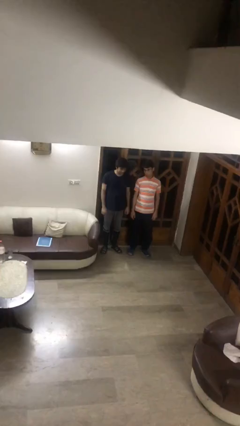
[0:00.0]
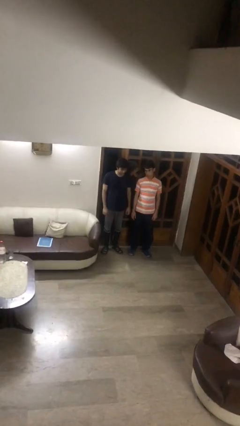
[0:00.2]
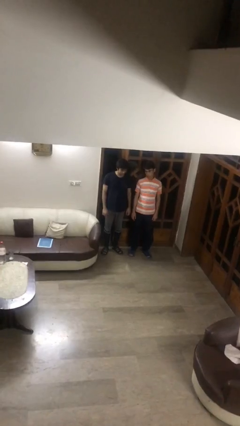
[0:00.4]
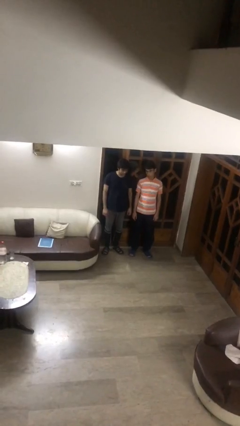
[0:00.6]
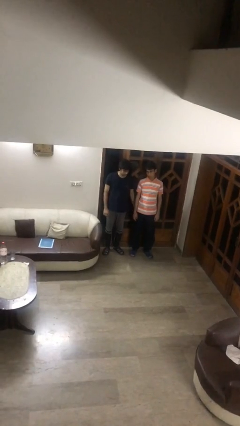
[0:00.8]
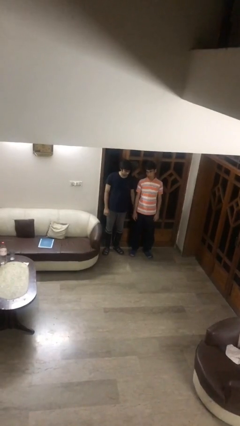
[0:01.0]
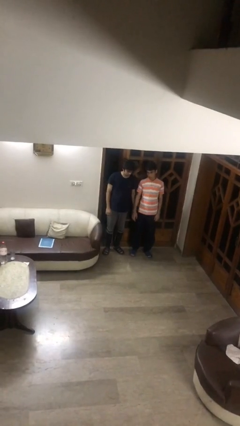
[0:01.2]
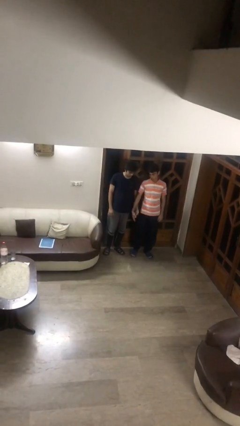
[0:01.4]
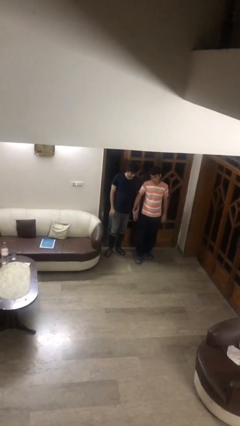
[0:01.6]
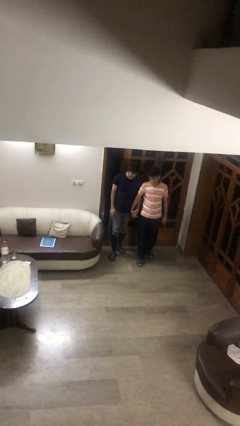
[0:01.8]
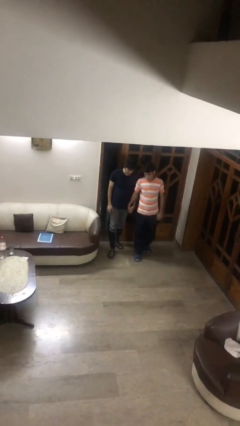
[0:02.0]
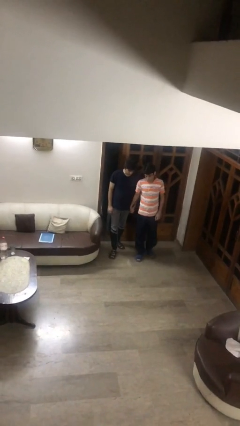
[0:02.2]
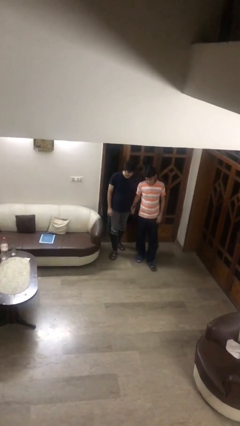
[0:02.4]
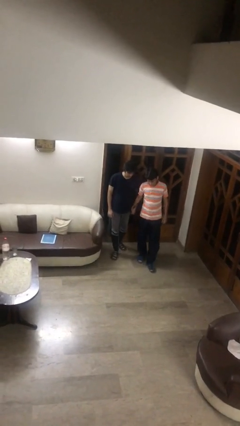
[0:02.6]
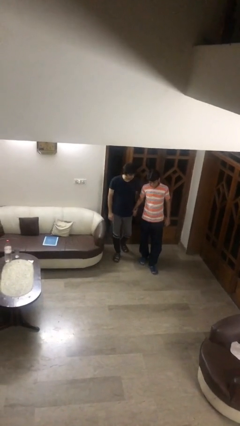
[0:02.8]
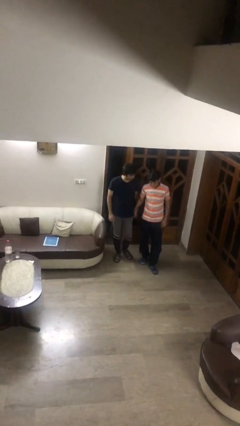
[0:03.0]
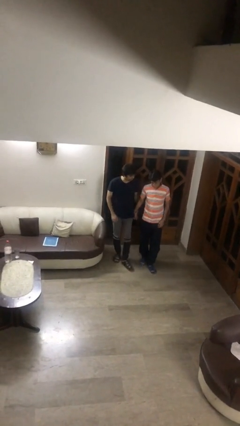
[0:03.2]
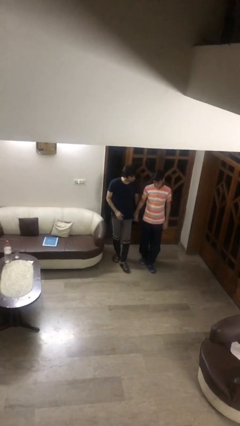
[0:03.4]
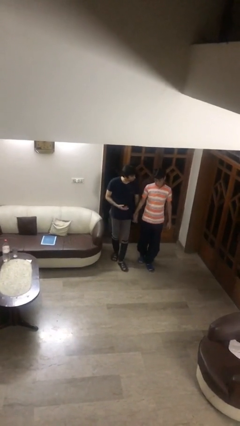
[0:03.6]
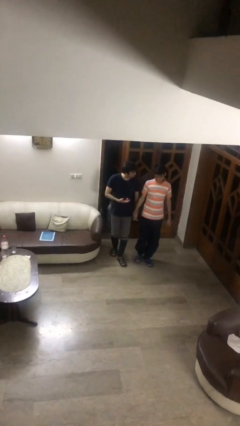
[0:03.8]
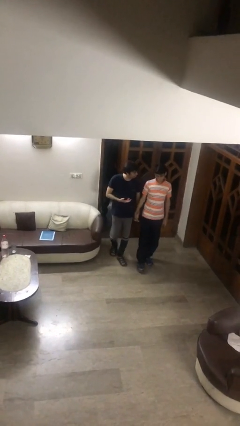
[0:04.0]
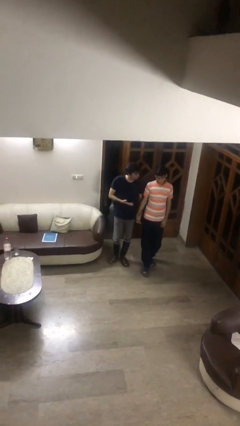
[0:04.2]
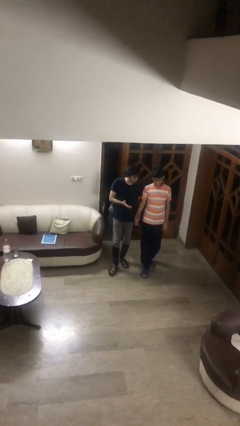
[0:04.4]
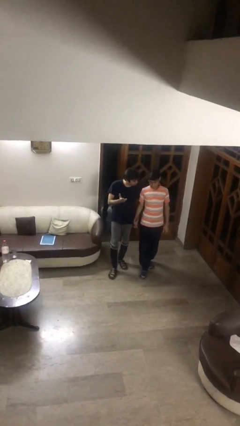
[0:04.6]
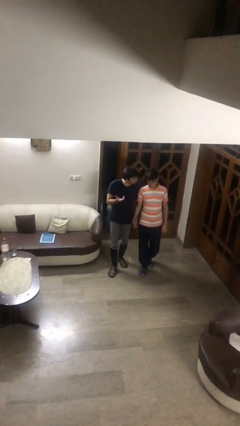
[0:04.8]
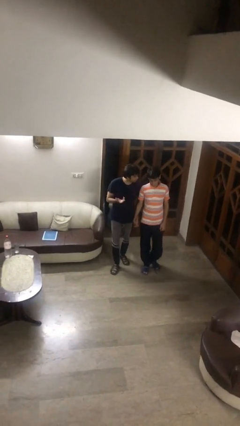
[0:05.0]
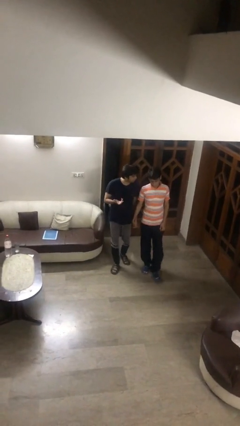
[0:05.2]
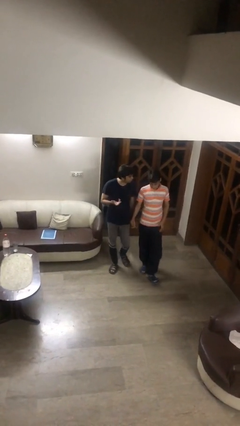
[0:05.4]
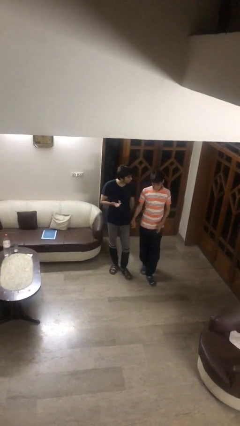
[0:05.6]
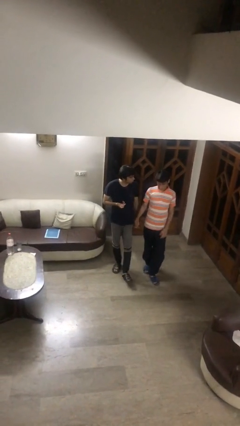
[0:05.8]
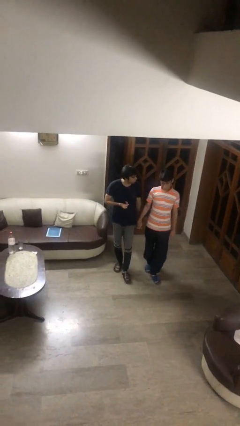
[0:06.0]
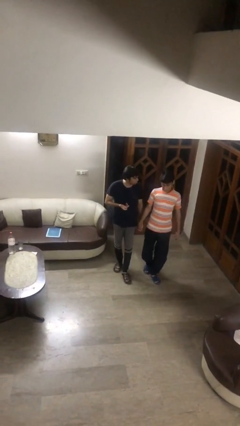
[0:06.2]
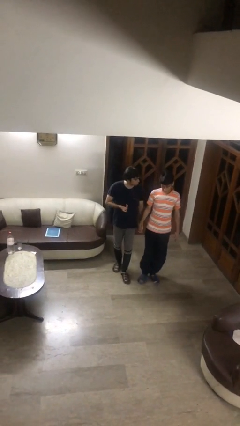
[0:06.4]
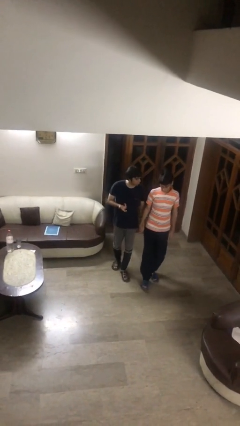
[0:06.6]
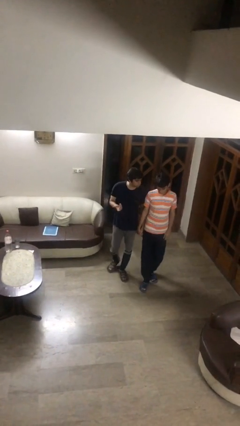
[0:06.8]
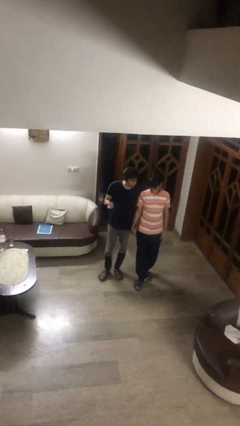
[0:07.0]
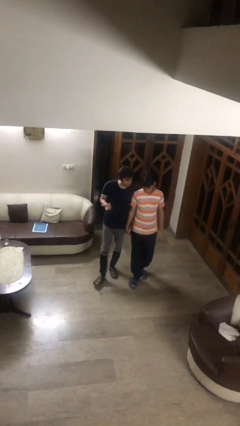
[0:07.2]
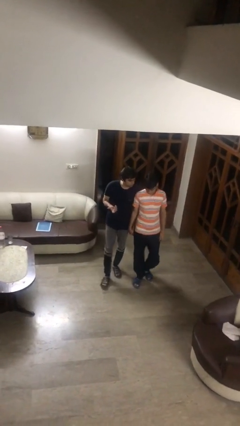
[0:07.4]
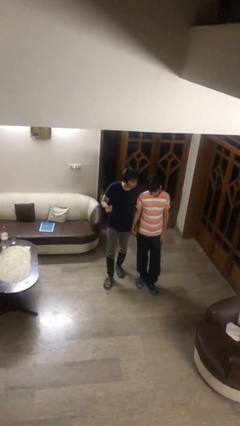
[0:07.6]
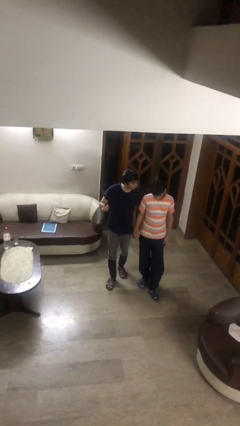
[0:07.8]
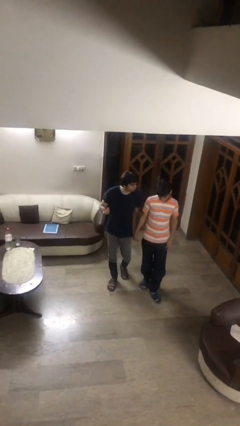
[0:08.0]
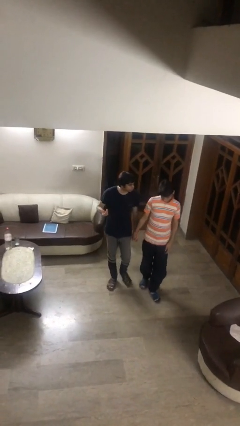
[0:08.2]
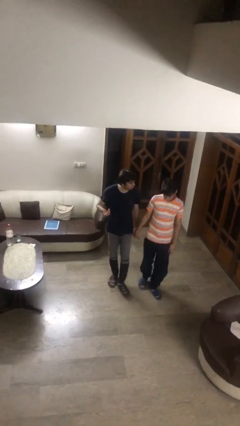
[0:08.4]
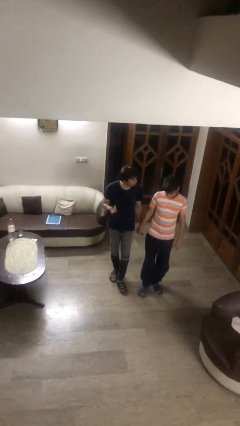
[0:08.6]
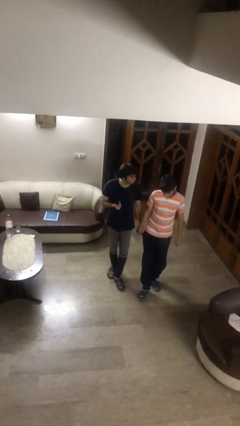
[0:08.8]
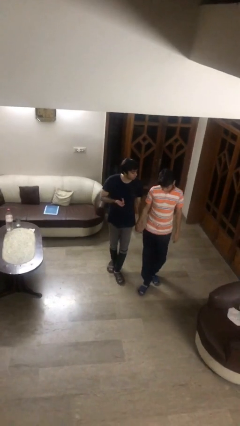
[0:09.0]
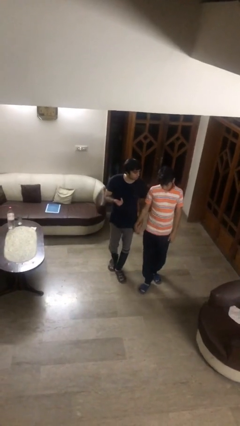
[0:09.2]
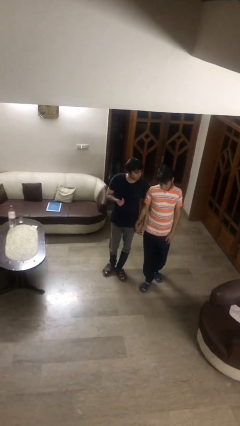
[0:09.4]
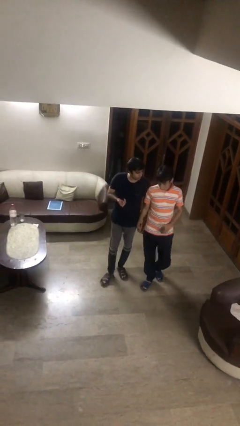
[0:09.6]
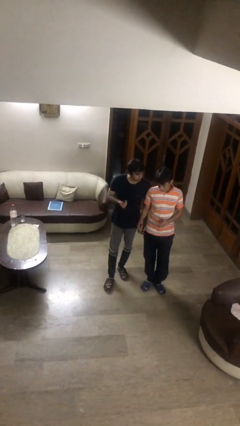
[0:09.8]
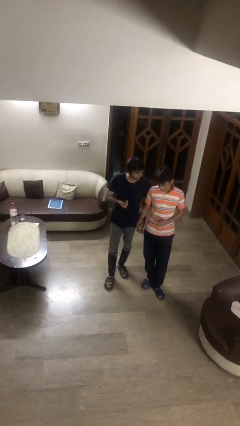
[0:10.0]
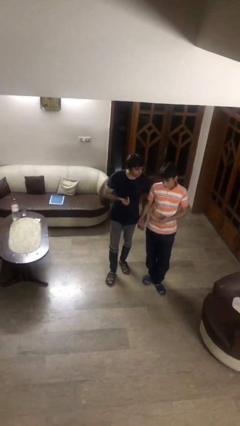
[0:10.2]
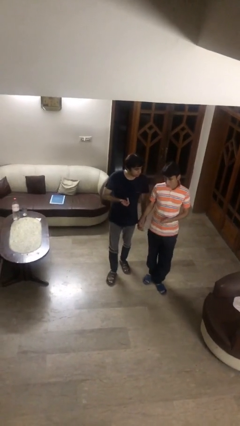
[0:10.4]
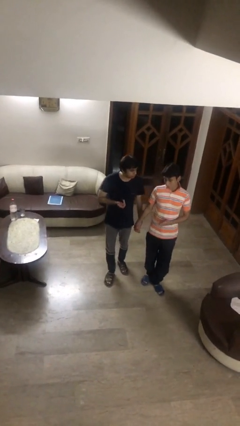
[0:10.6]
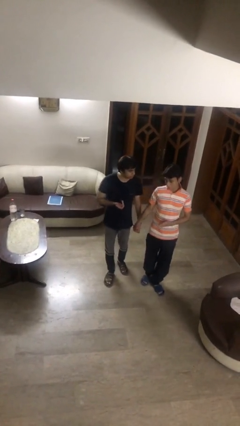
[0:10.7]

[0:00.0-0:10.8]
person holds hand

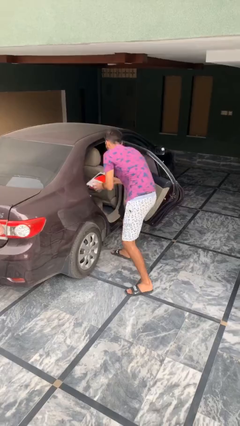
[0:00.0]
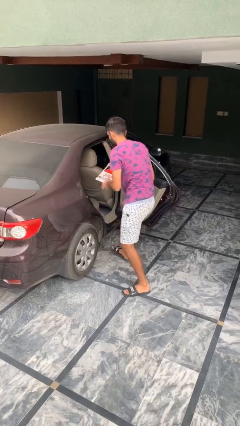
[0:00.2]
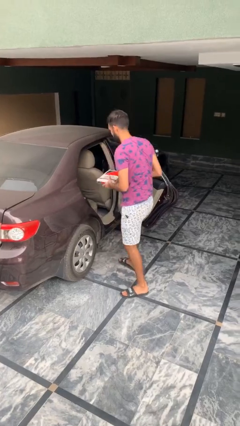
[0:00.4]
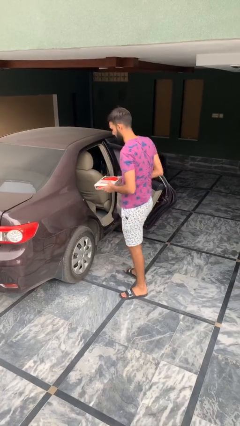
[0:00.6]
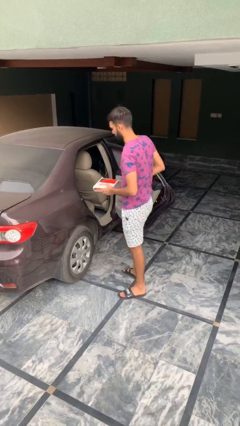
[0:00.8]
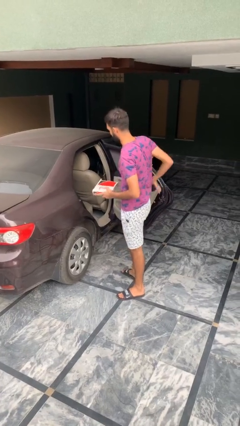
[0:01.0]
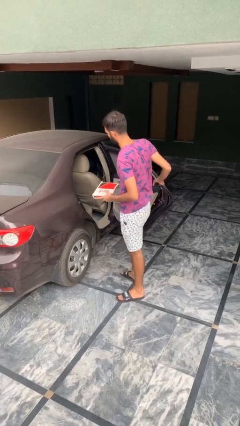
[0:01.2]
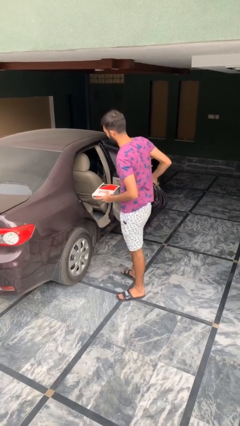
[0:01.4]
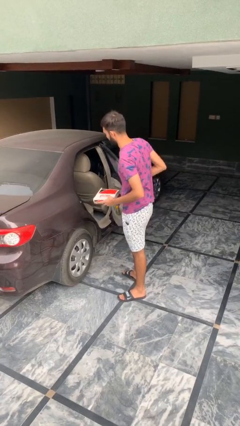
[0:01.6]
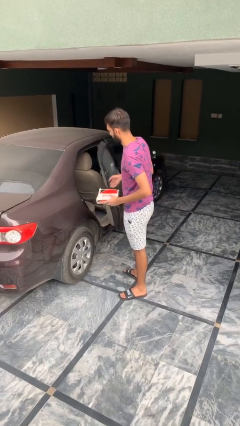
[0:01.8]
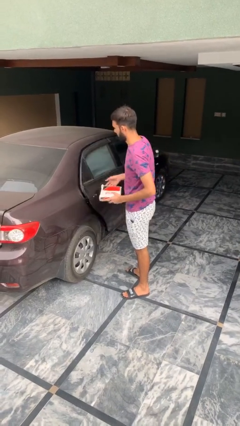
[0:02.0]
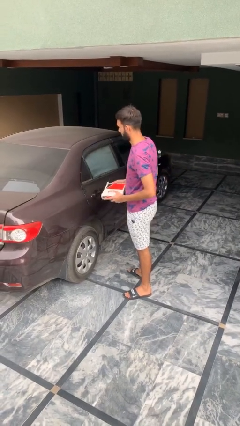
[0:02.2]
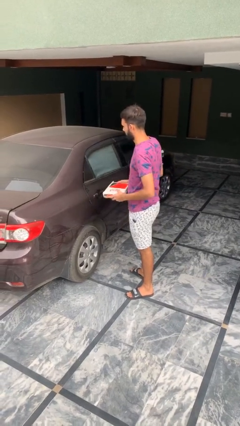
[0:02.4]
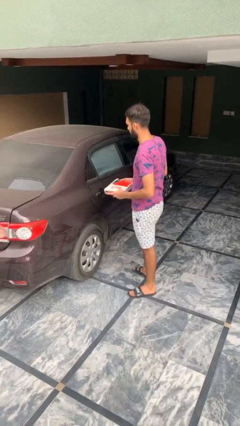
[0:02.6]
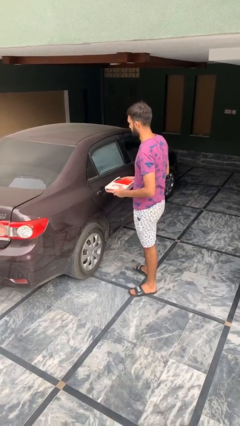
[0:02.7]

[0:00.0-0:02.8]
person closes car door

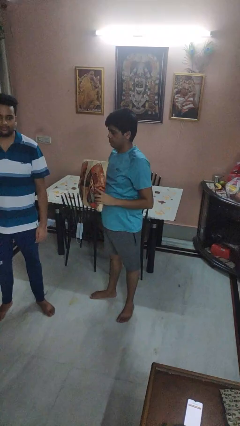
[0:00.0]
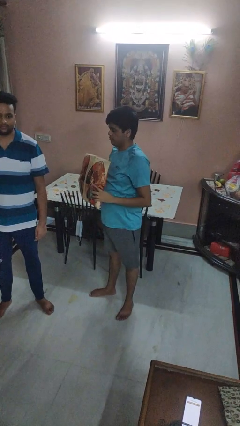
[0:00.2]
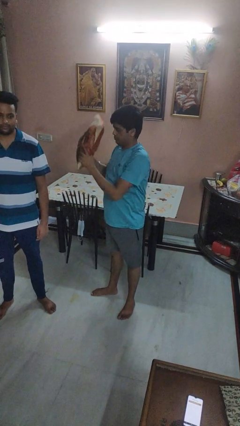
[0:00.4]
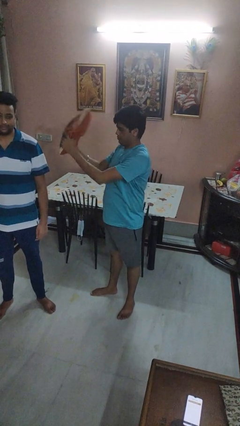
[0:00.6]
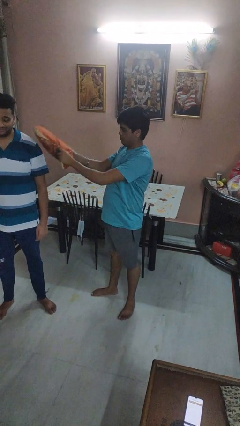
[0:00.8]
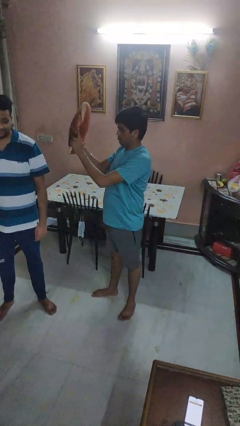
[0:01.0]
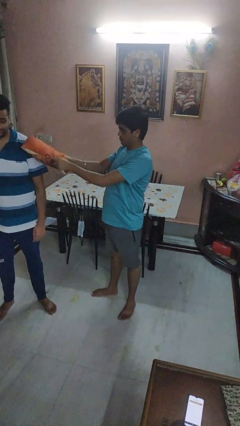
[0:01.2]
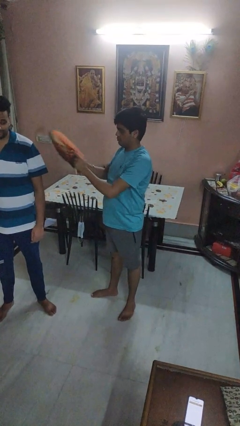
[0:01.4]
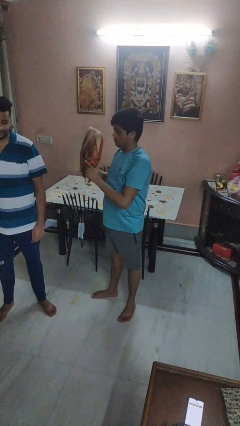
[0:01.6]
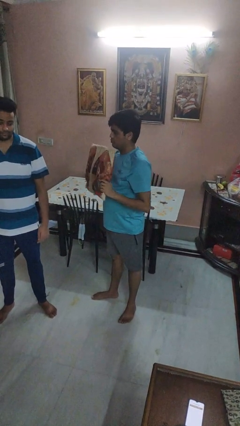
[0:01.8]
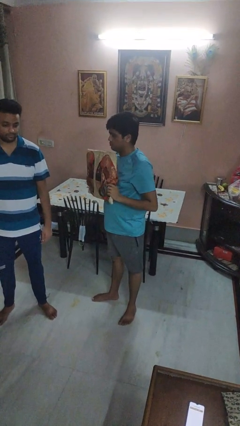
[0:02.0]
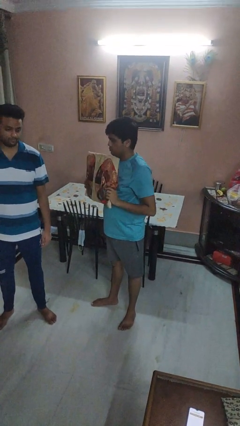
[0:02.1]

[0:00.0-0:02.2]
person hits person with pillow

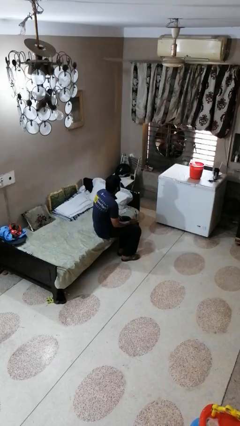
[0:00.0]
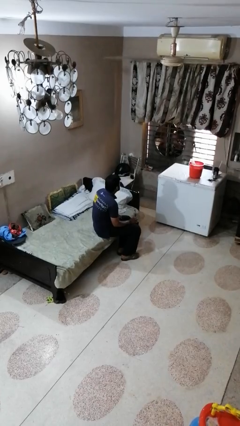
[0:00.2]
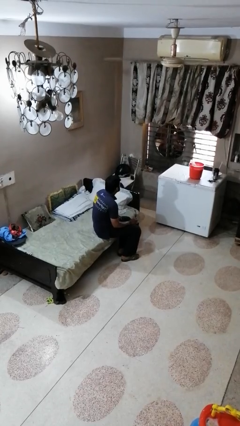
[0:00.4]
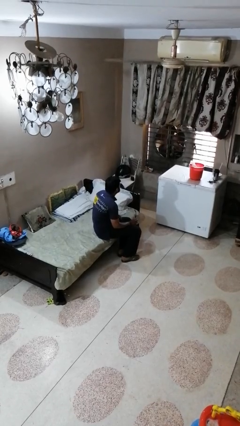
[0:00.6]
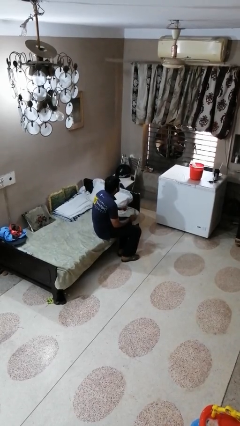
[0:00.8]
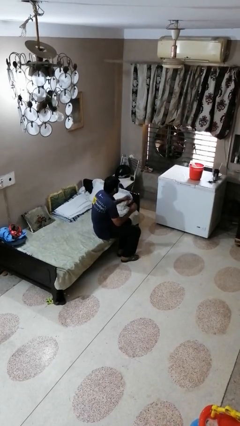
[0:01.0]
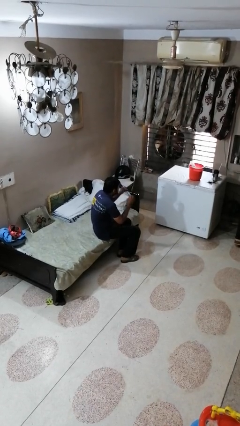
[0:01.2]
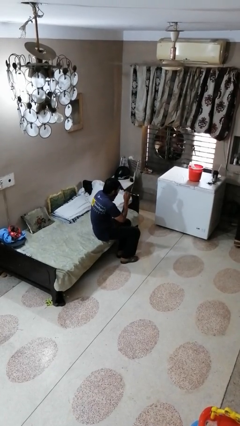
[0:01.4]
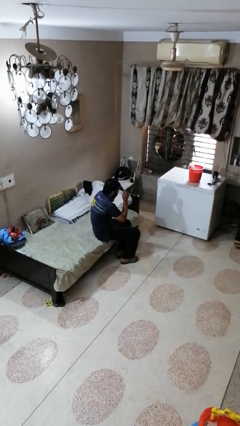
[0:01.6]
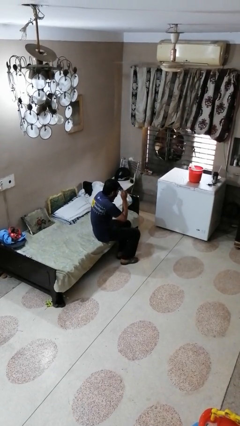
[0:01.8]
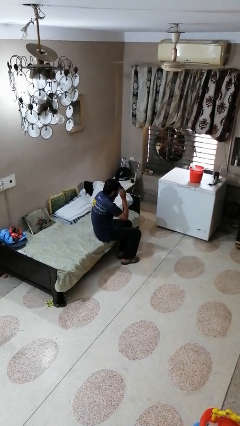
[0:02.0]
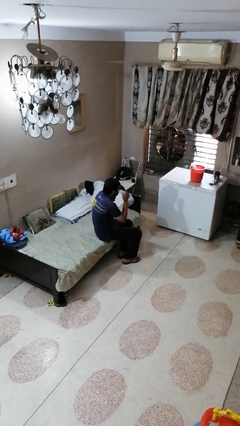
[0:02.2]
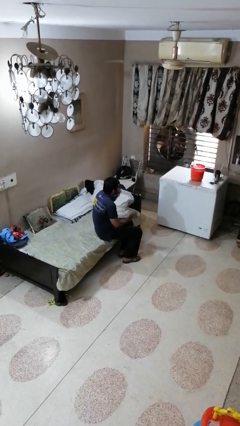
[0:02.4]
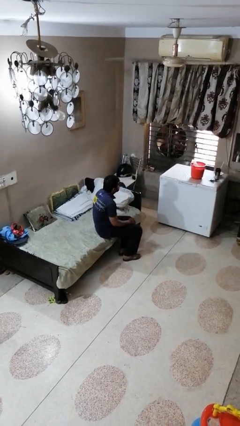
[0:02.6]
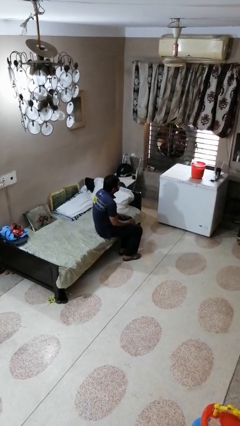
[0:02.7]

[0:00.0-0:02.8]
person puts on glasses
